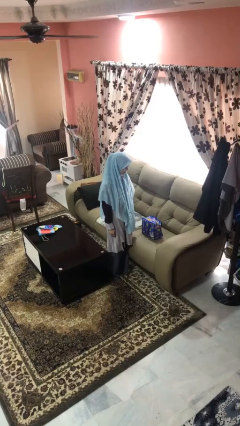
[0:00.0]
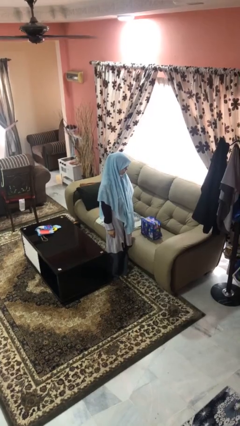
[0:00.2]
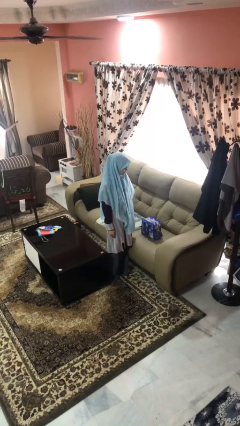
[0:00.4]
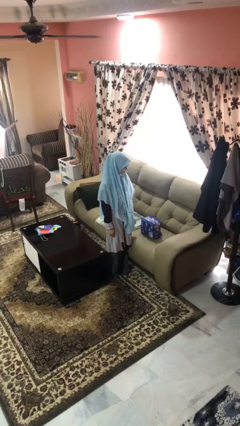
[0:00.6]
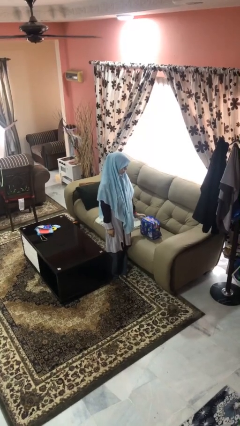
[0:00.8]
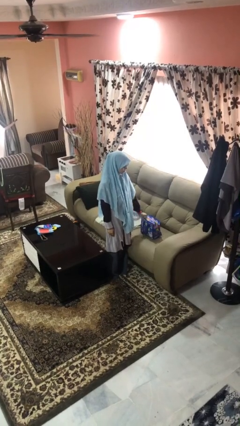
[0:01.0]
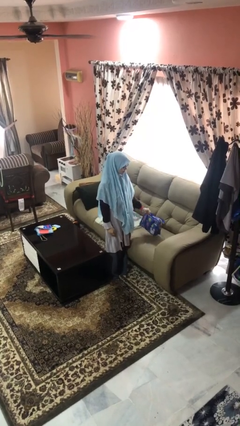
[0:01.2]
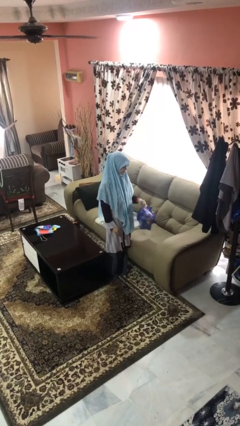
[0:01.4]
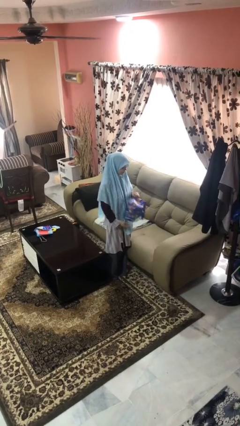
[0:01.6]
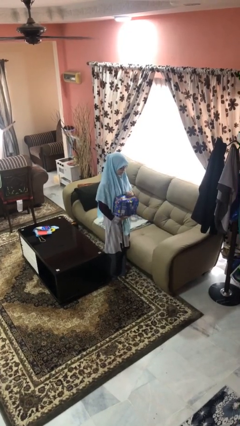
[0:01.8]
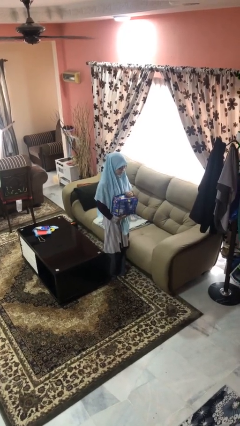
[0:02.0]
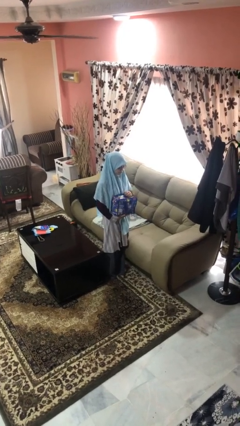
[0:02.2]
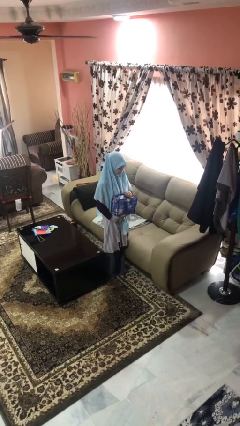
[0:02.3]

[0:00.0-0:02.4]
person picks up object from couch

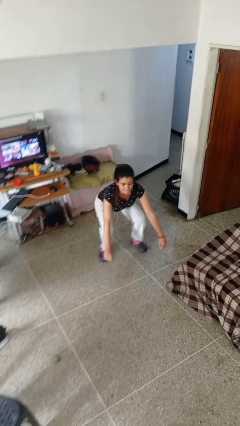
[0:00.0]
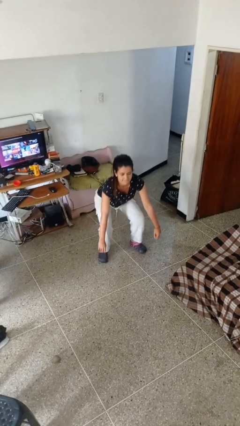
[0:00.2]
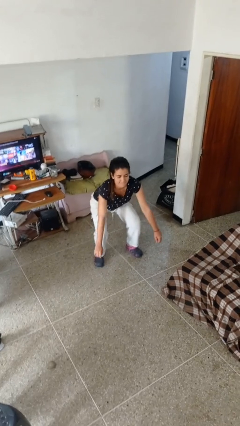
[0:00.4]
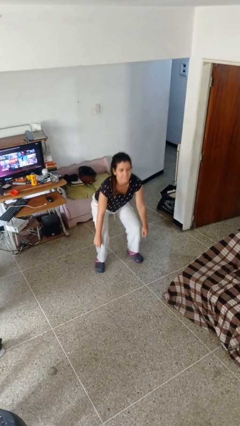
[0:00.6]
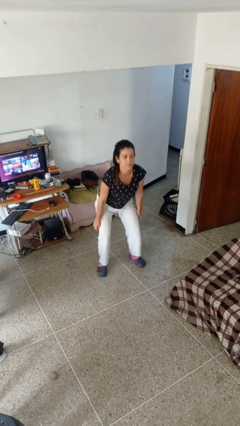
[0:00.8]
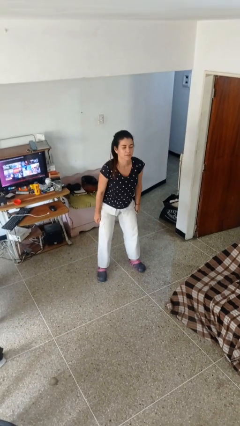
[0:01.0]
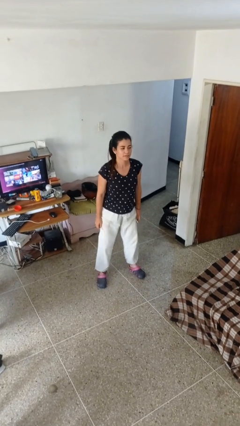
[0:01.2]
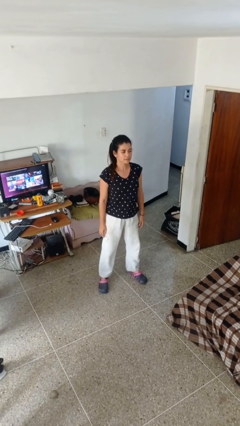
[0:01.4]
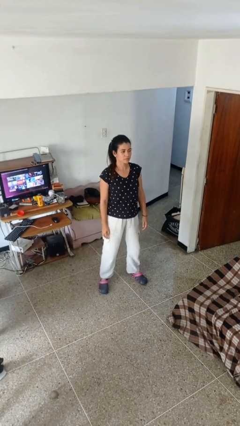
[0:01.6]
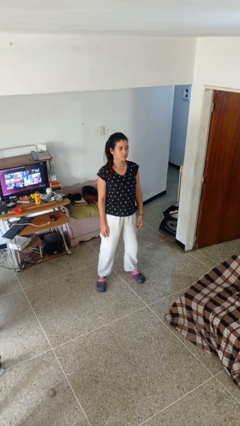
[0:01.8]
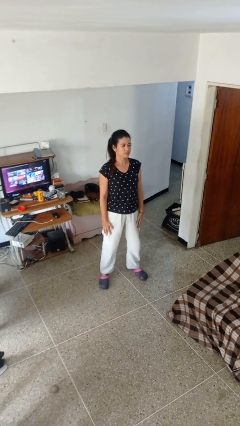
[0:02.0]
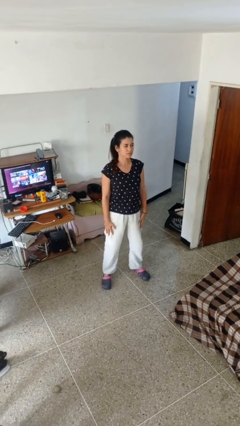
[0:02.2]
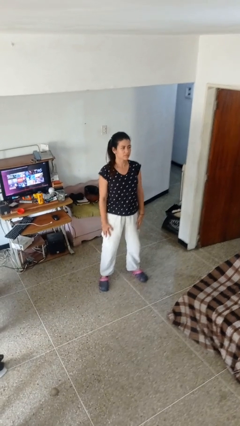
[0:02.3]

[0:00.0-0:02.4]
person stands up

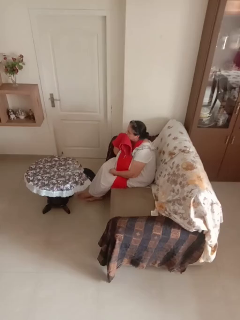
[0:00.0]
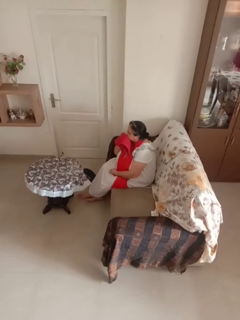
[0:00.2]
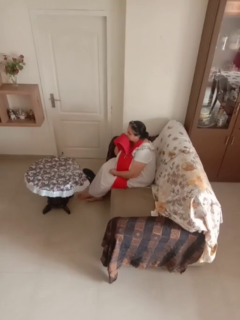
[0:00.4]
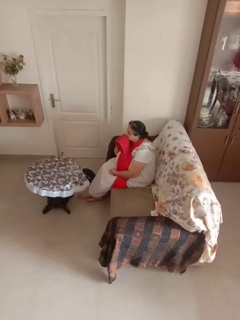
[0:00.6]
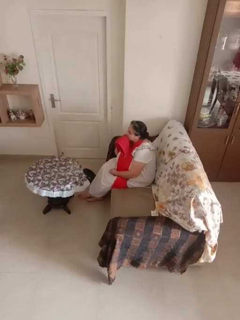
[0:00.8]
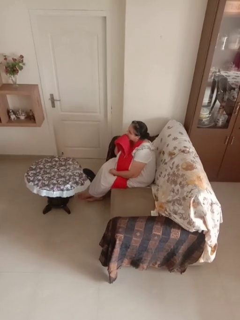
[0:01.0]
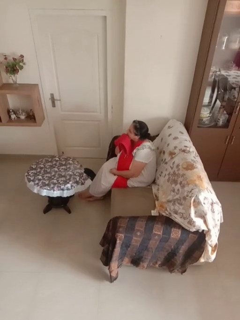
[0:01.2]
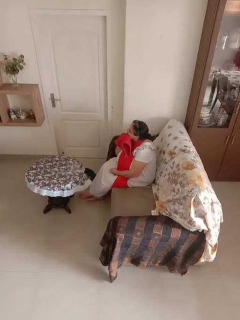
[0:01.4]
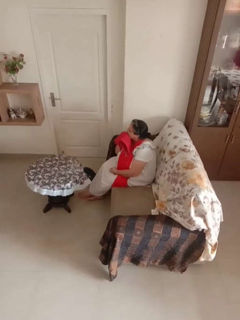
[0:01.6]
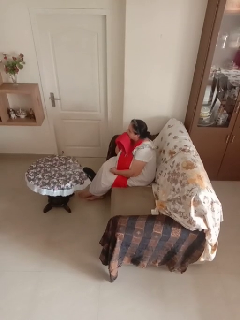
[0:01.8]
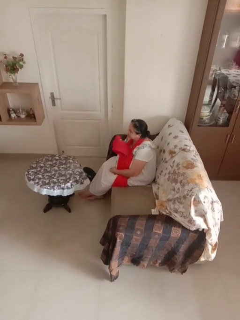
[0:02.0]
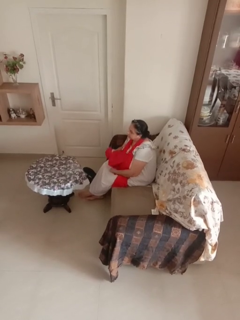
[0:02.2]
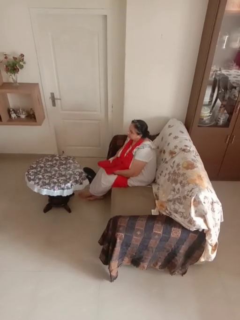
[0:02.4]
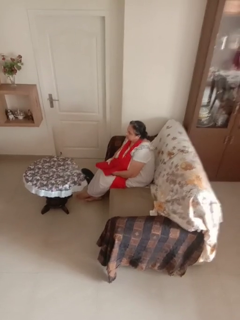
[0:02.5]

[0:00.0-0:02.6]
person wipes mouth with napkin

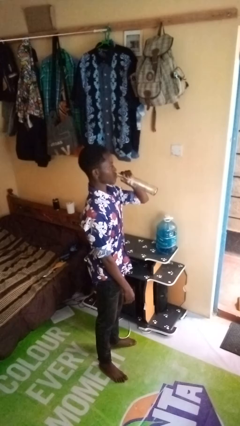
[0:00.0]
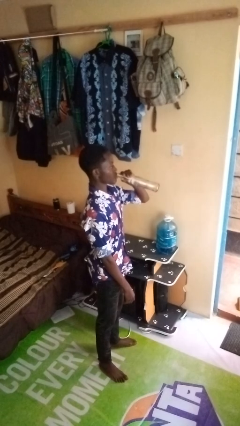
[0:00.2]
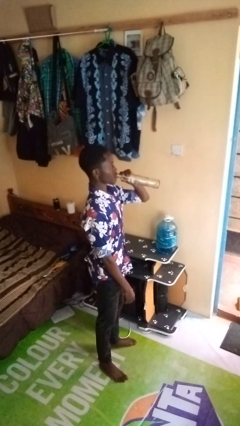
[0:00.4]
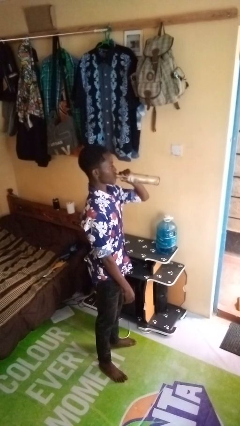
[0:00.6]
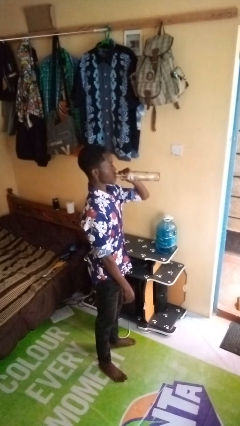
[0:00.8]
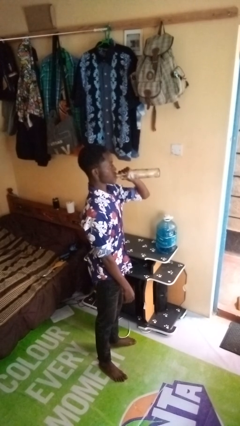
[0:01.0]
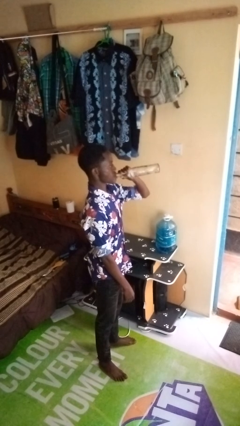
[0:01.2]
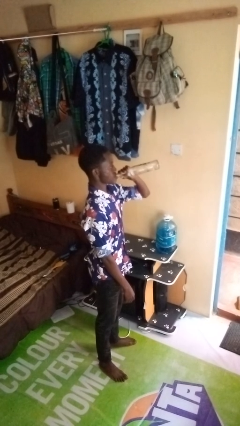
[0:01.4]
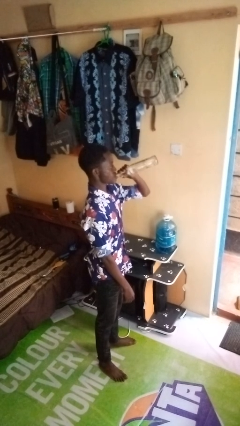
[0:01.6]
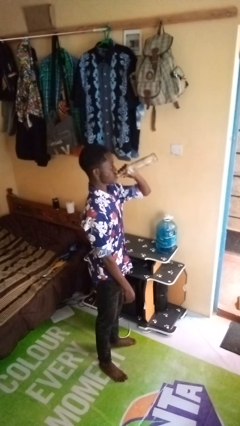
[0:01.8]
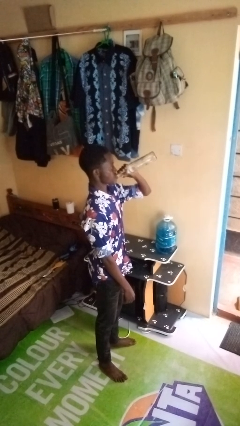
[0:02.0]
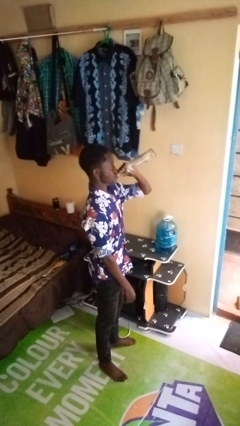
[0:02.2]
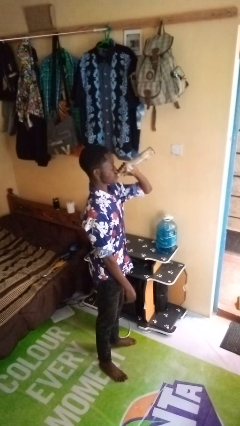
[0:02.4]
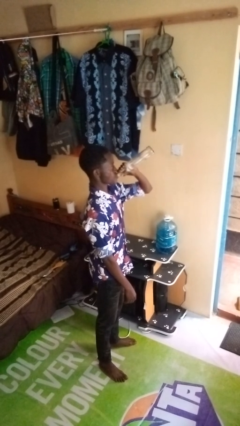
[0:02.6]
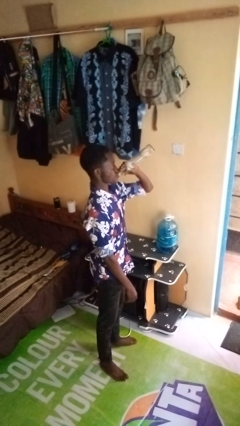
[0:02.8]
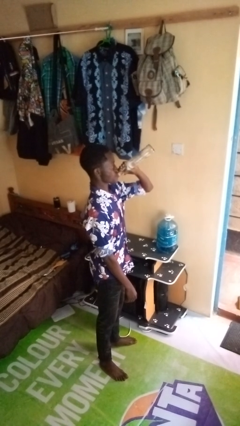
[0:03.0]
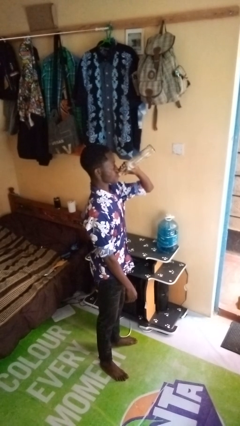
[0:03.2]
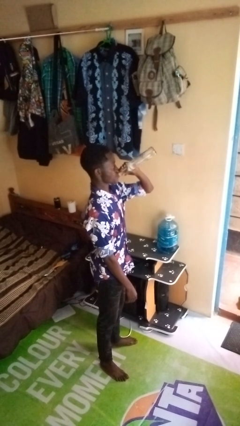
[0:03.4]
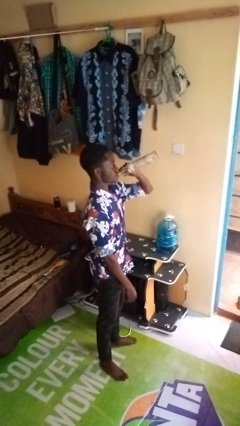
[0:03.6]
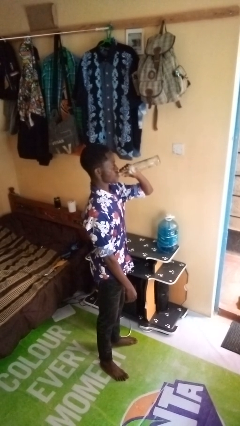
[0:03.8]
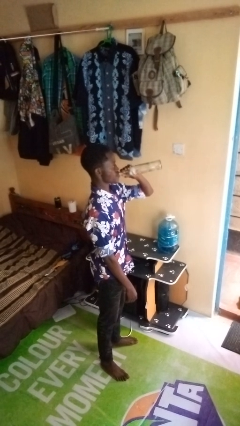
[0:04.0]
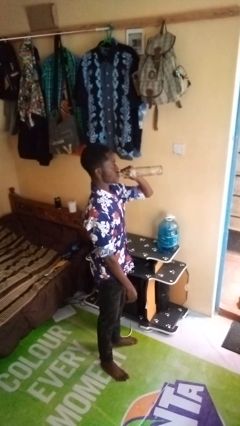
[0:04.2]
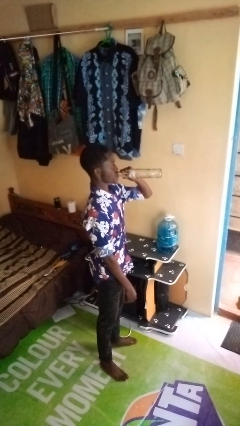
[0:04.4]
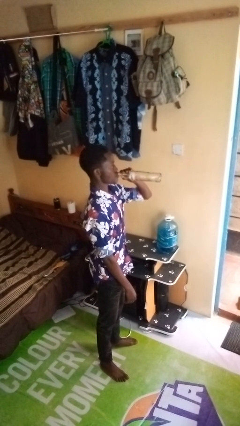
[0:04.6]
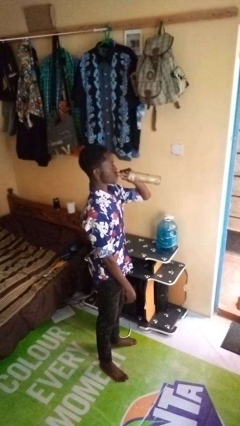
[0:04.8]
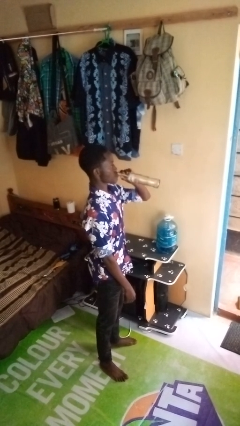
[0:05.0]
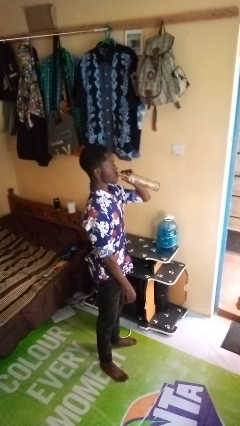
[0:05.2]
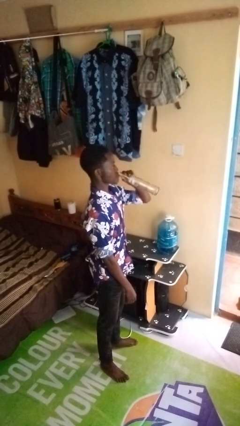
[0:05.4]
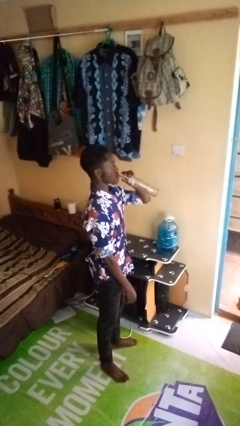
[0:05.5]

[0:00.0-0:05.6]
person drinks from bottle

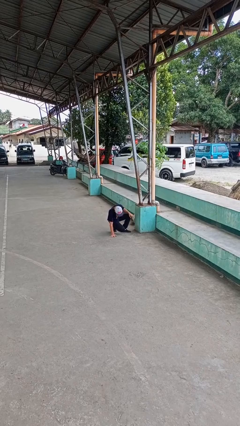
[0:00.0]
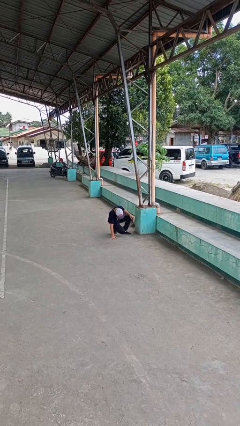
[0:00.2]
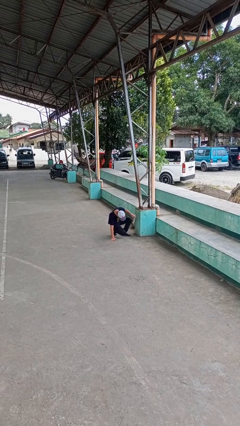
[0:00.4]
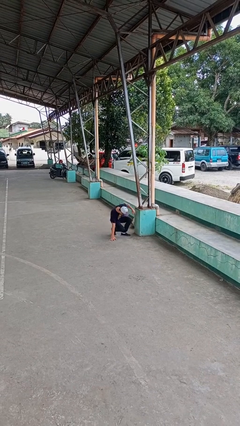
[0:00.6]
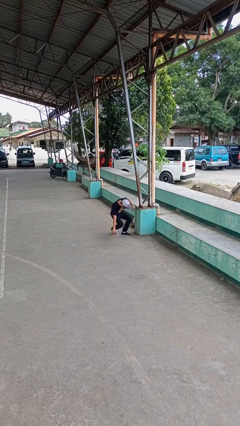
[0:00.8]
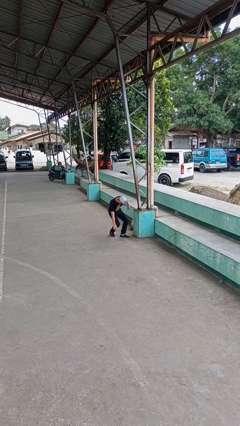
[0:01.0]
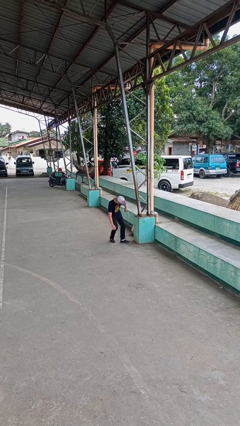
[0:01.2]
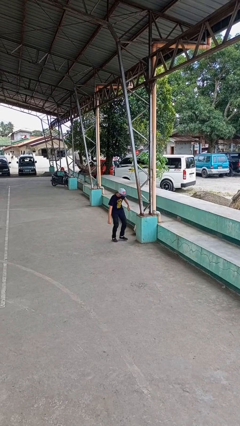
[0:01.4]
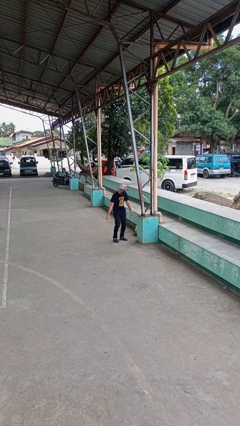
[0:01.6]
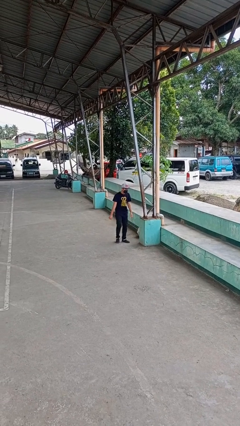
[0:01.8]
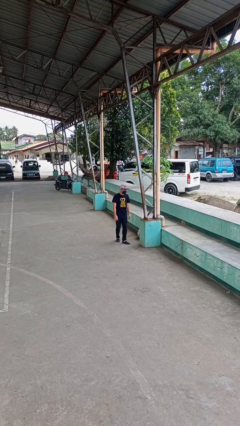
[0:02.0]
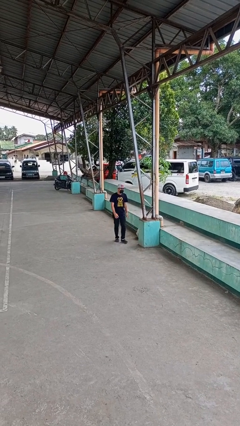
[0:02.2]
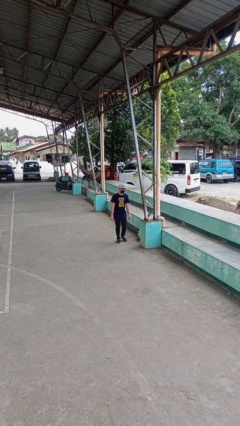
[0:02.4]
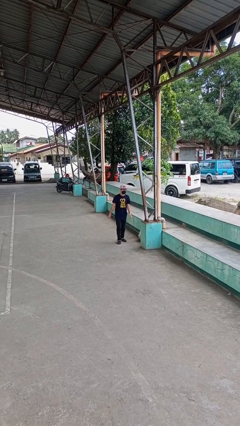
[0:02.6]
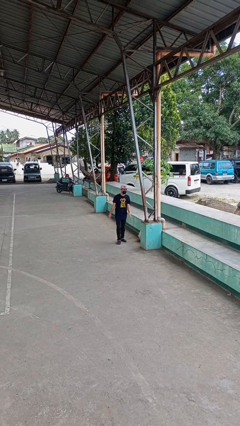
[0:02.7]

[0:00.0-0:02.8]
person stands up from floor

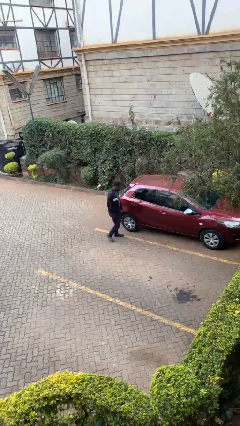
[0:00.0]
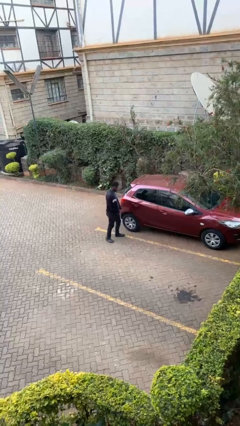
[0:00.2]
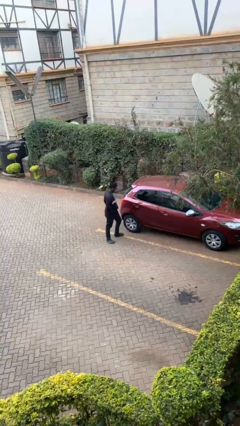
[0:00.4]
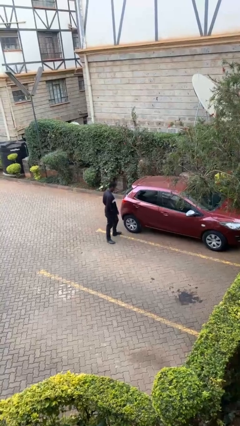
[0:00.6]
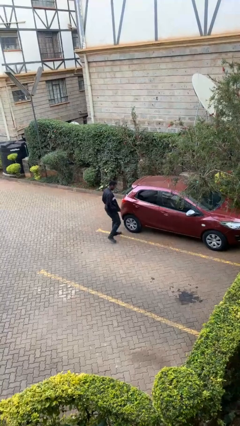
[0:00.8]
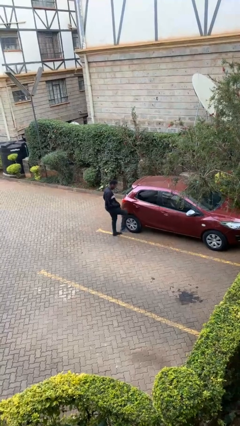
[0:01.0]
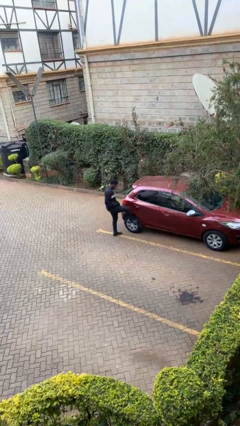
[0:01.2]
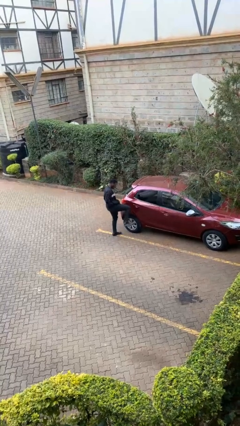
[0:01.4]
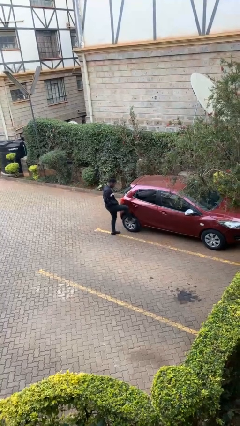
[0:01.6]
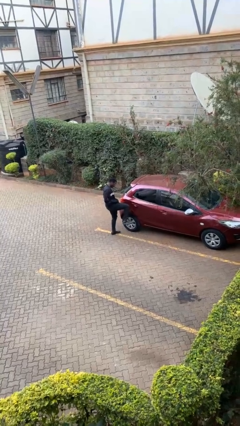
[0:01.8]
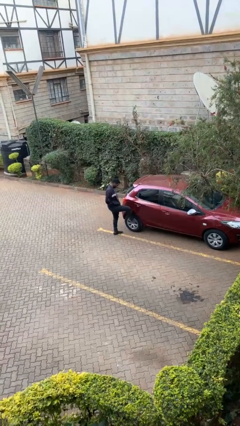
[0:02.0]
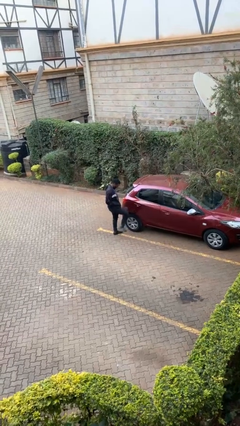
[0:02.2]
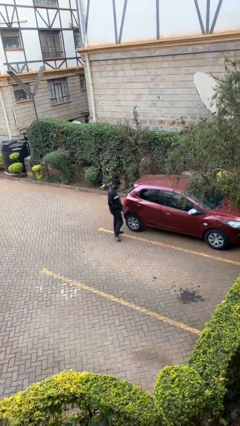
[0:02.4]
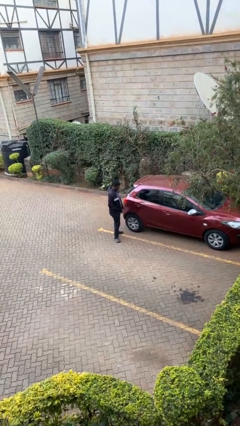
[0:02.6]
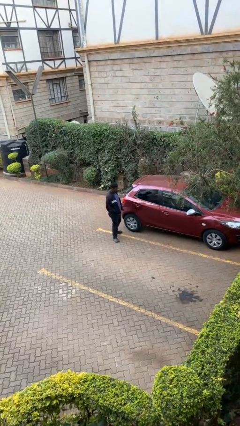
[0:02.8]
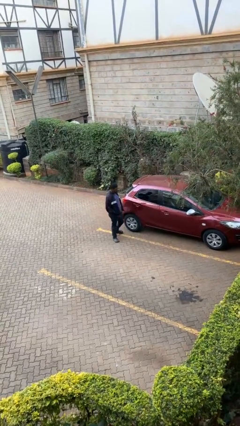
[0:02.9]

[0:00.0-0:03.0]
person kicks car tires
